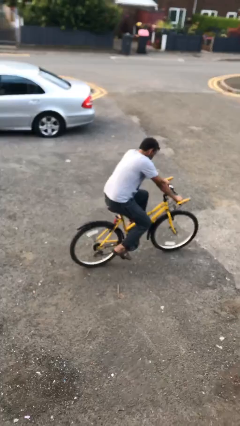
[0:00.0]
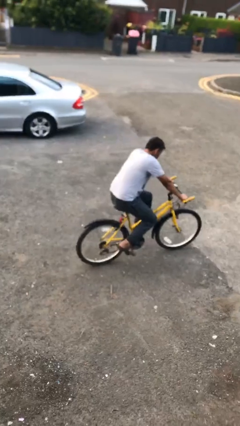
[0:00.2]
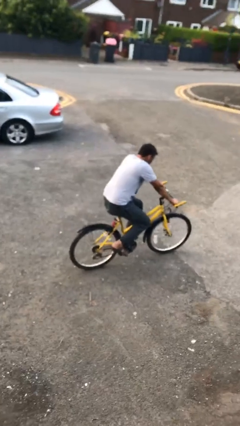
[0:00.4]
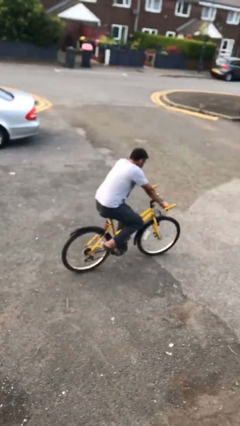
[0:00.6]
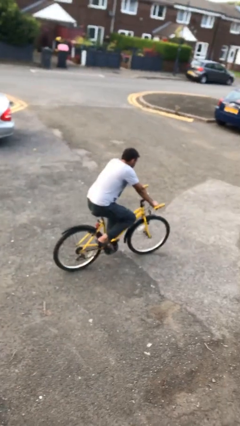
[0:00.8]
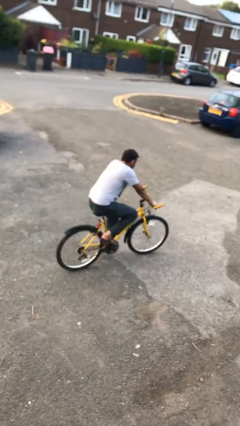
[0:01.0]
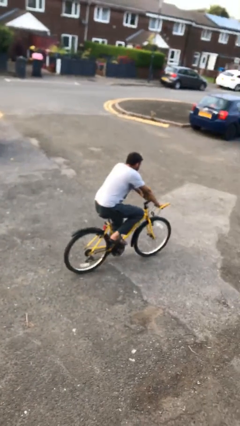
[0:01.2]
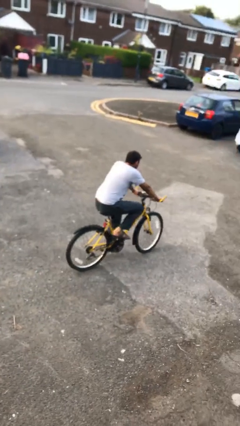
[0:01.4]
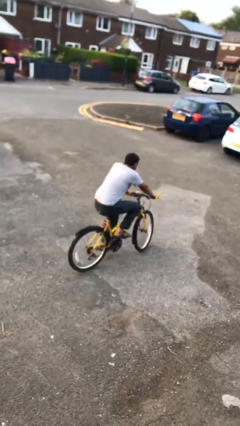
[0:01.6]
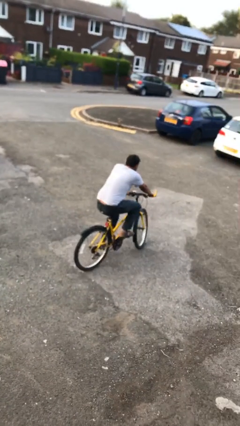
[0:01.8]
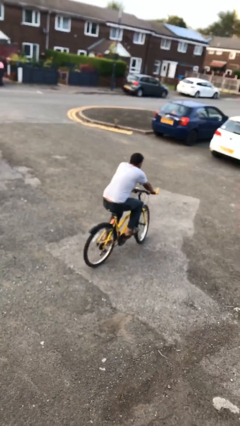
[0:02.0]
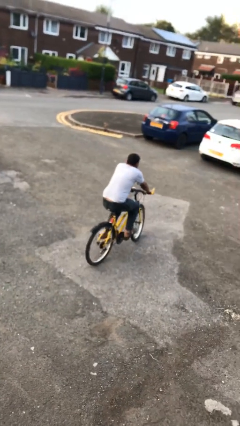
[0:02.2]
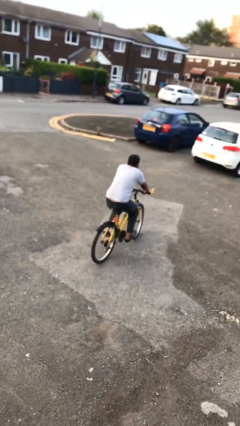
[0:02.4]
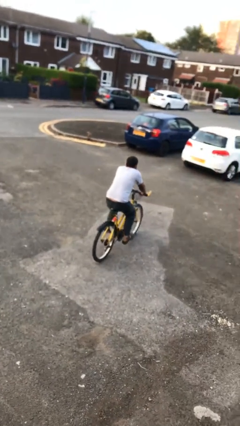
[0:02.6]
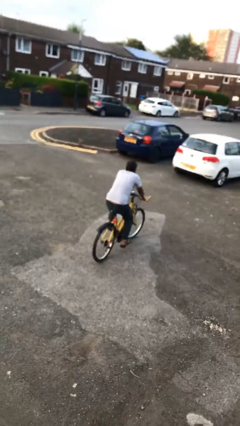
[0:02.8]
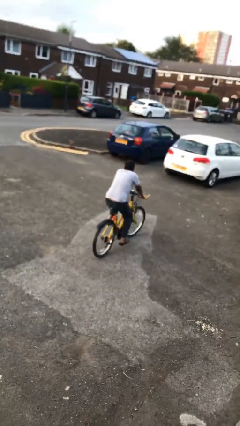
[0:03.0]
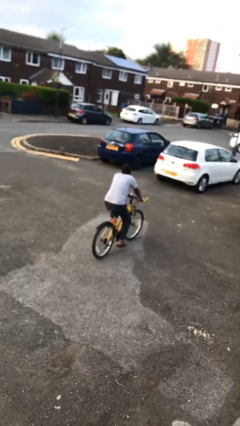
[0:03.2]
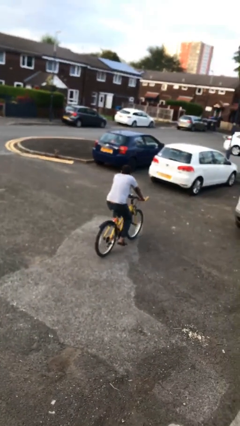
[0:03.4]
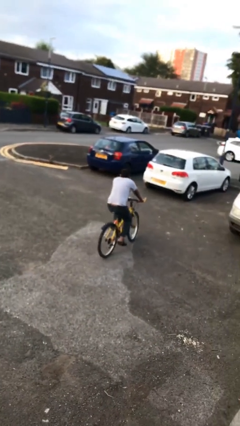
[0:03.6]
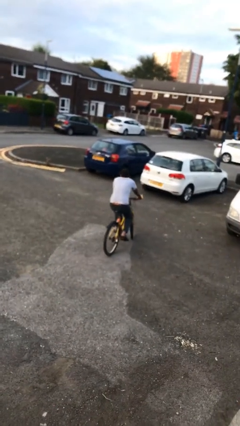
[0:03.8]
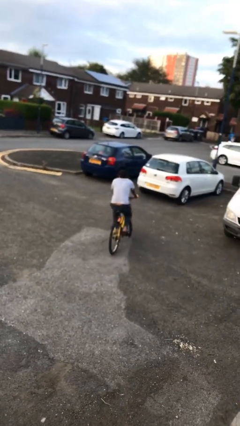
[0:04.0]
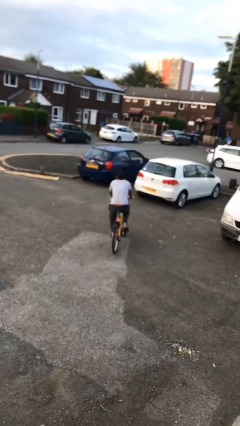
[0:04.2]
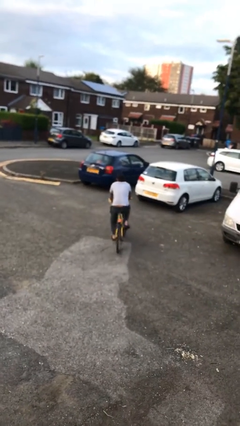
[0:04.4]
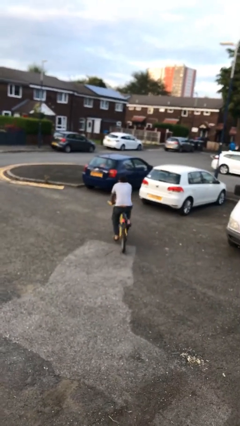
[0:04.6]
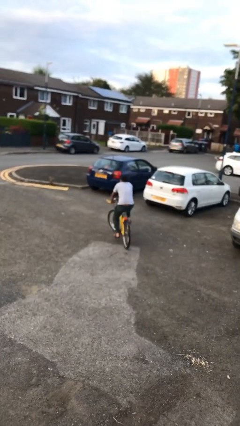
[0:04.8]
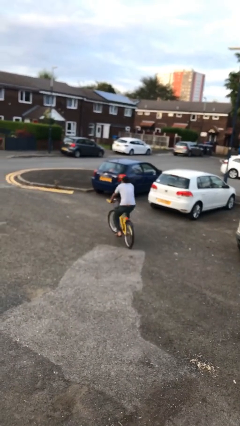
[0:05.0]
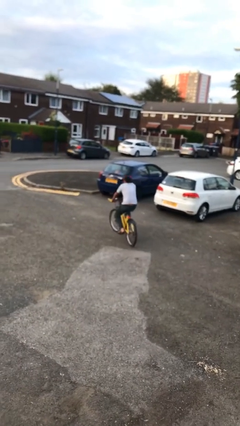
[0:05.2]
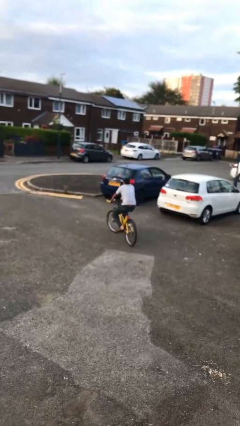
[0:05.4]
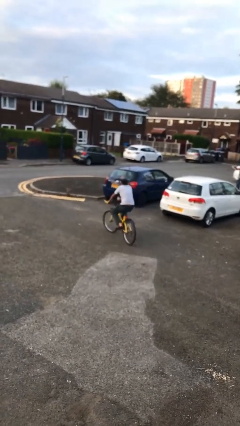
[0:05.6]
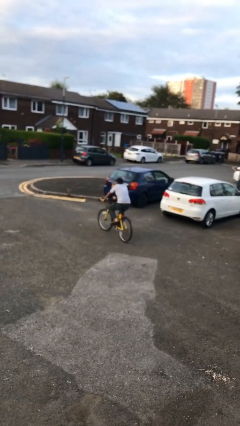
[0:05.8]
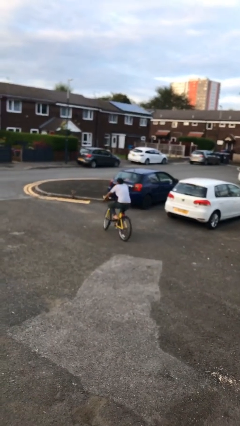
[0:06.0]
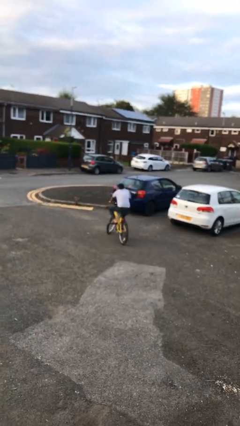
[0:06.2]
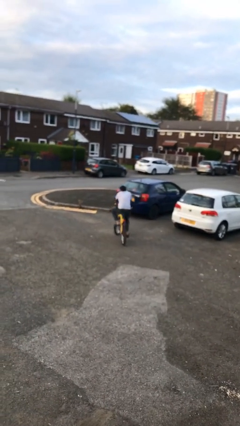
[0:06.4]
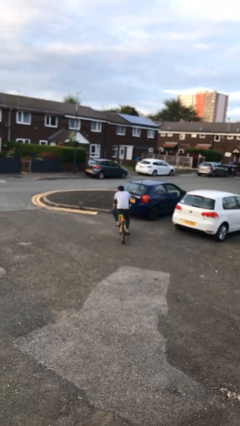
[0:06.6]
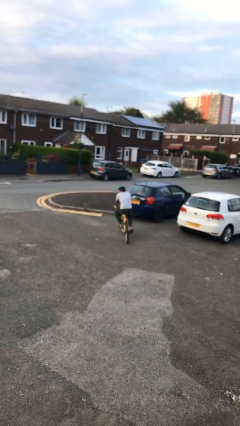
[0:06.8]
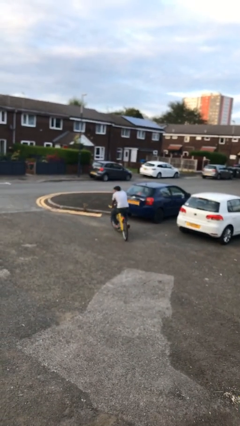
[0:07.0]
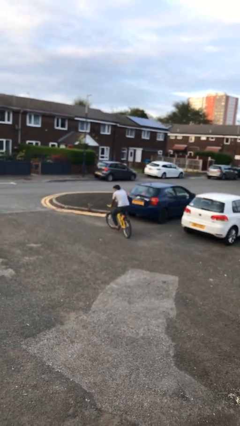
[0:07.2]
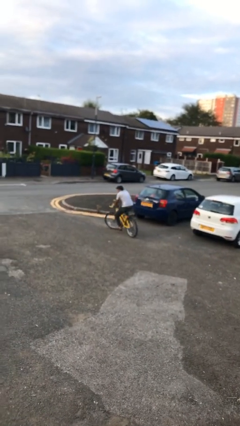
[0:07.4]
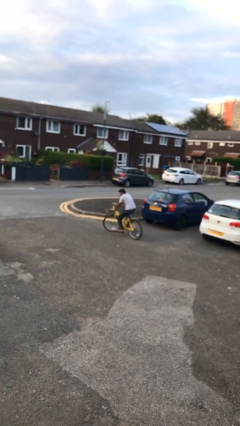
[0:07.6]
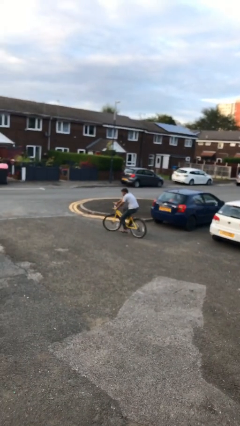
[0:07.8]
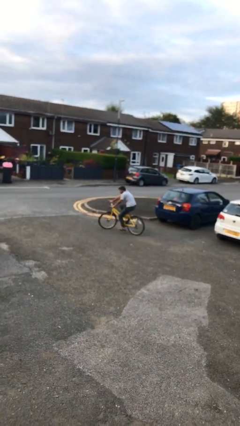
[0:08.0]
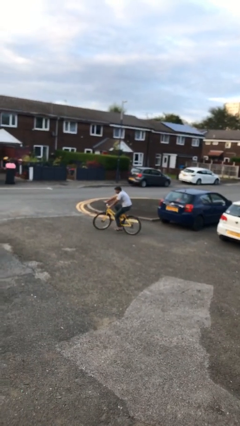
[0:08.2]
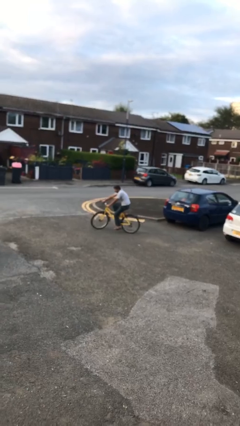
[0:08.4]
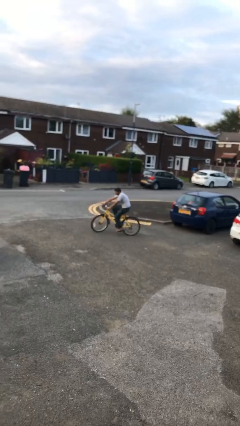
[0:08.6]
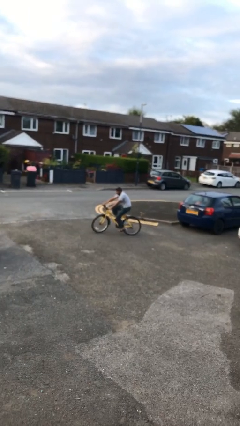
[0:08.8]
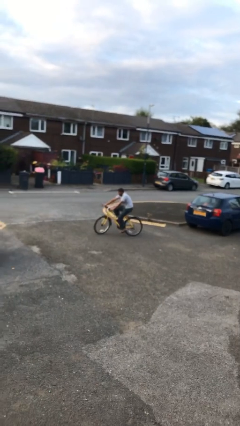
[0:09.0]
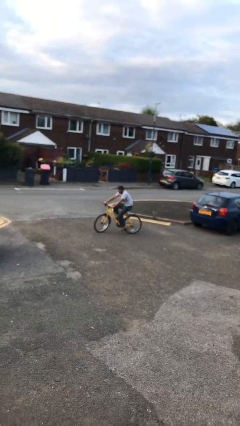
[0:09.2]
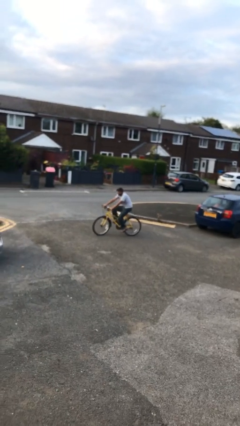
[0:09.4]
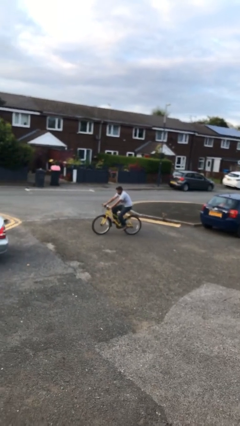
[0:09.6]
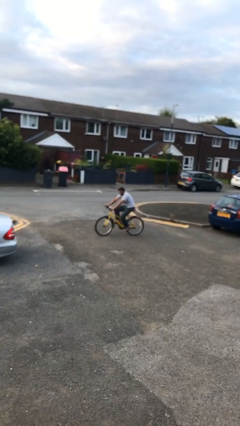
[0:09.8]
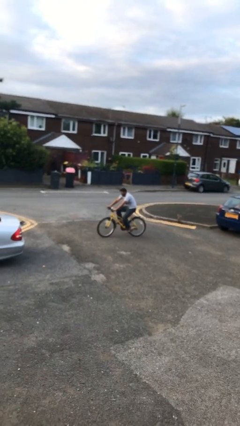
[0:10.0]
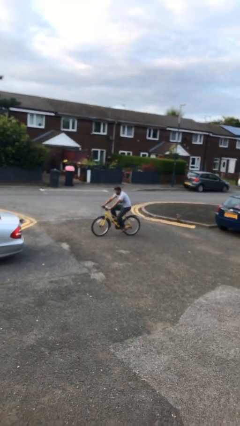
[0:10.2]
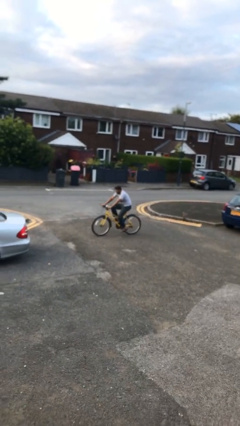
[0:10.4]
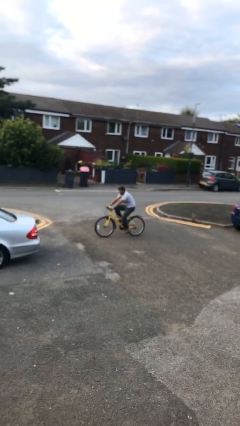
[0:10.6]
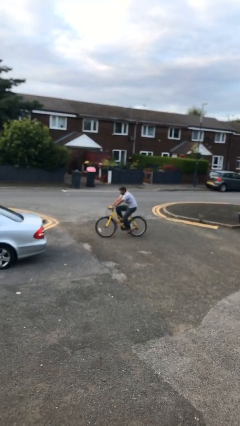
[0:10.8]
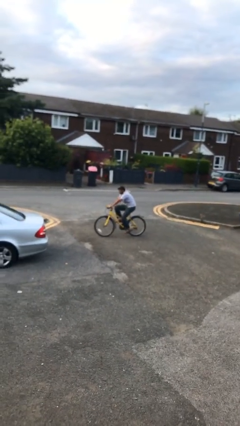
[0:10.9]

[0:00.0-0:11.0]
person rides bicycle

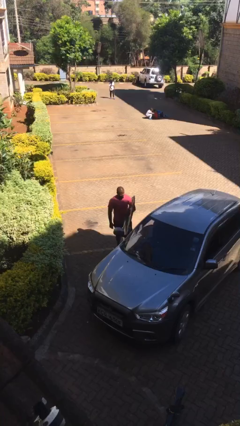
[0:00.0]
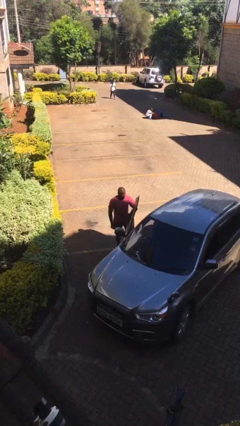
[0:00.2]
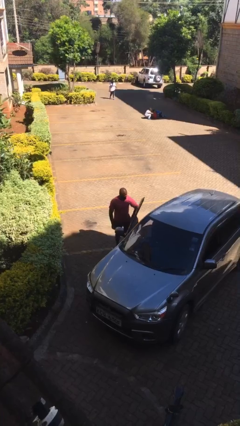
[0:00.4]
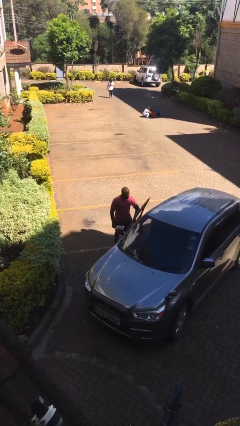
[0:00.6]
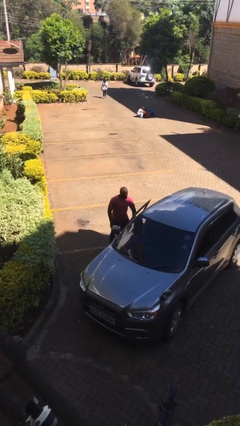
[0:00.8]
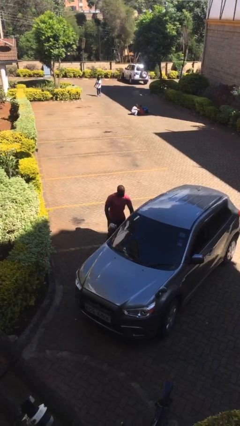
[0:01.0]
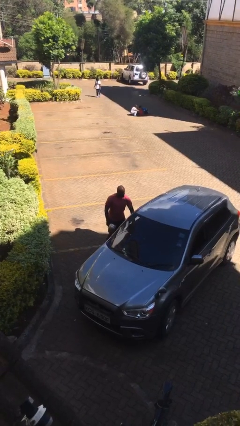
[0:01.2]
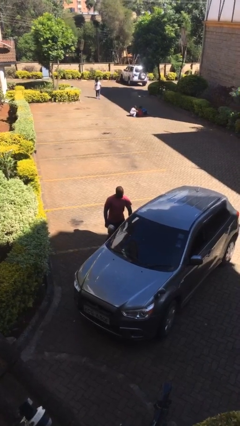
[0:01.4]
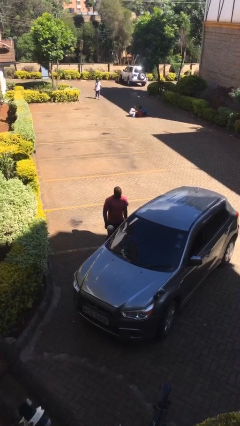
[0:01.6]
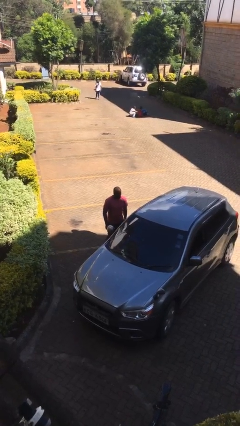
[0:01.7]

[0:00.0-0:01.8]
person closes car door

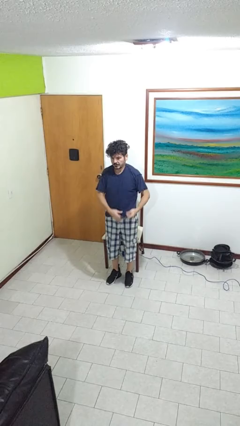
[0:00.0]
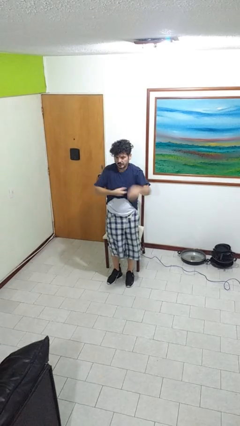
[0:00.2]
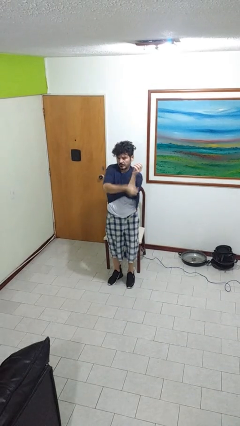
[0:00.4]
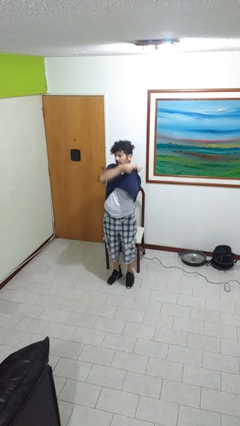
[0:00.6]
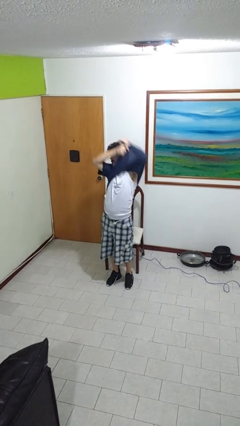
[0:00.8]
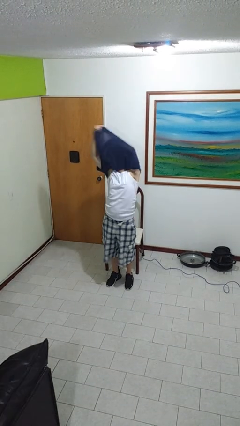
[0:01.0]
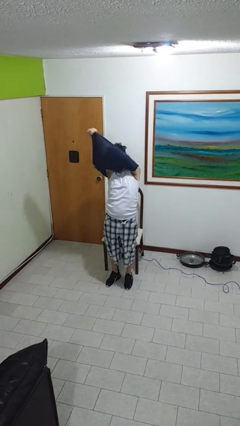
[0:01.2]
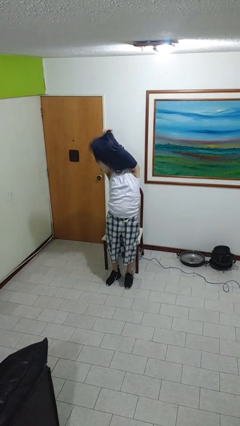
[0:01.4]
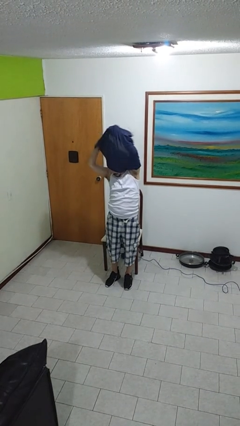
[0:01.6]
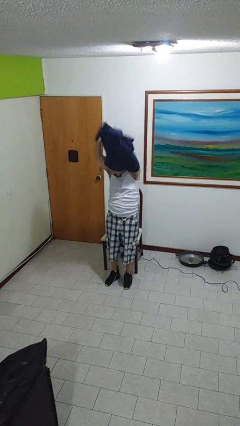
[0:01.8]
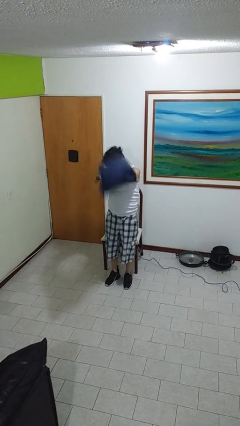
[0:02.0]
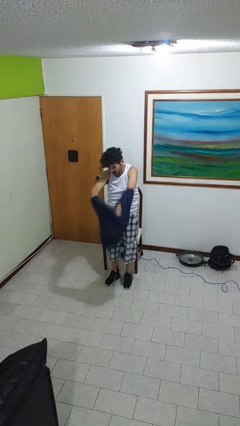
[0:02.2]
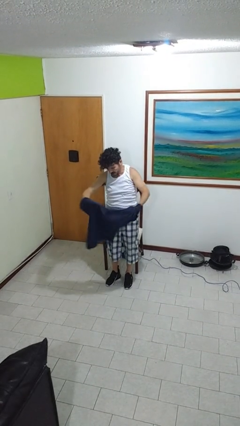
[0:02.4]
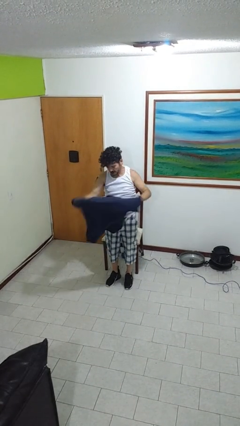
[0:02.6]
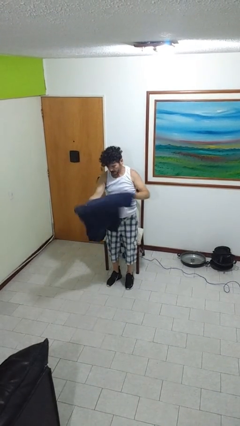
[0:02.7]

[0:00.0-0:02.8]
person takes off shirt

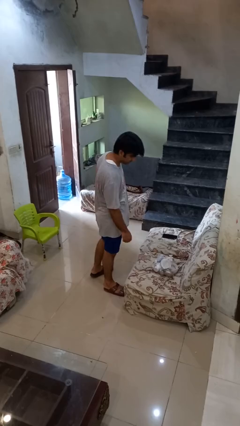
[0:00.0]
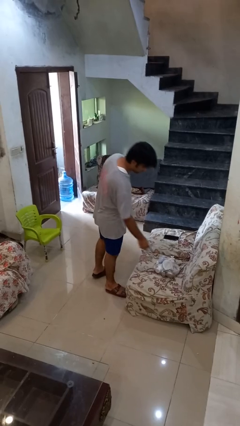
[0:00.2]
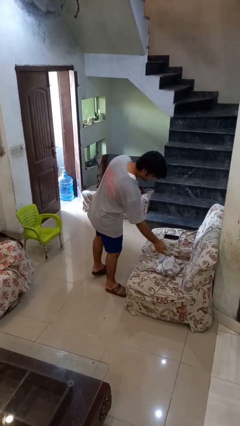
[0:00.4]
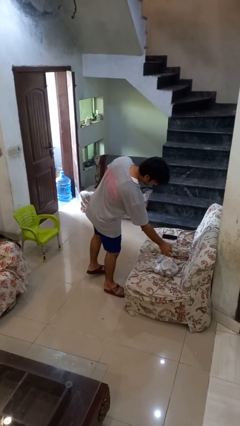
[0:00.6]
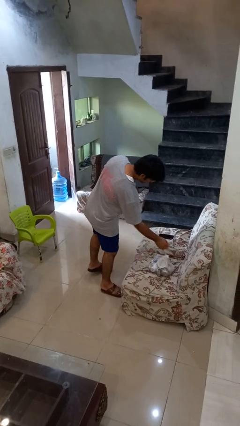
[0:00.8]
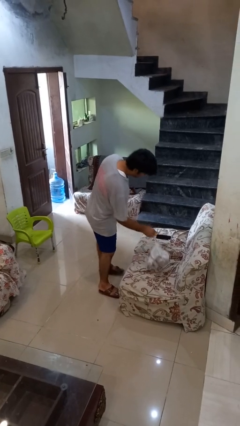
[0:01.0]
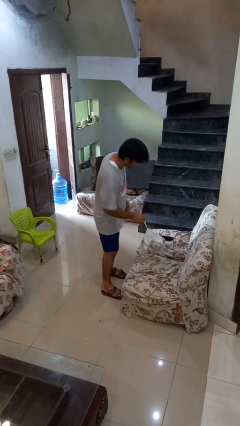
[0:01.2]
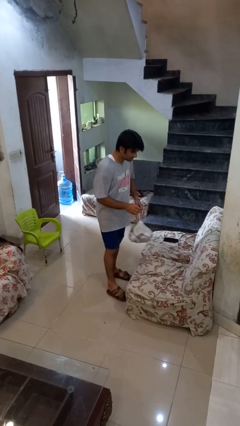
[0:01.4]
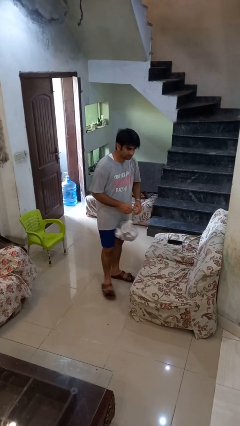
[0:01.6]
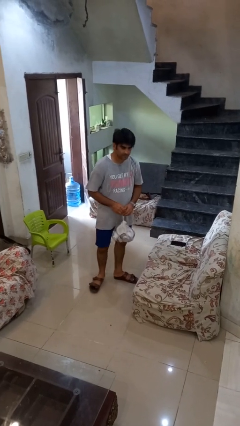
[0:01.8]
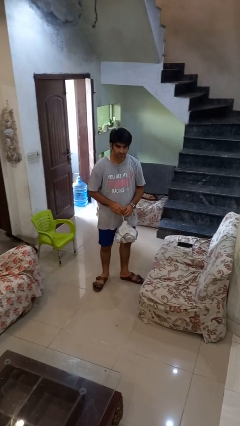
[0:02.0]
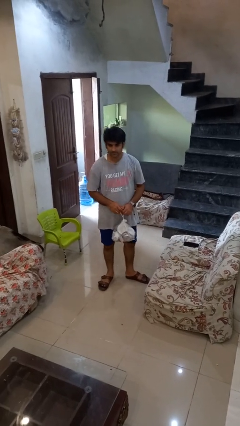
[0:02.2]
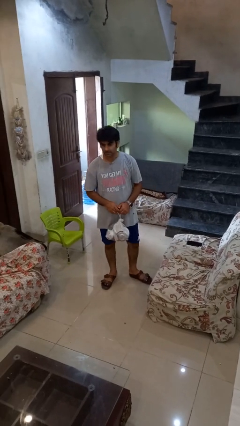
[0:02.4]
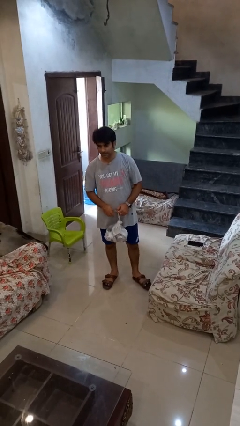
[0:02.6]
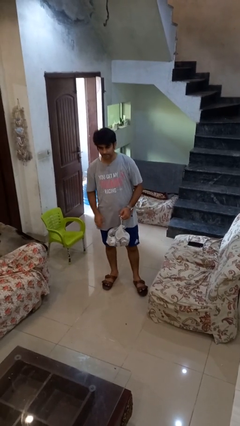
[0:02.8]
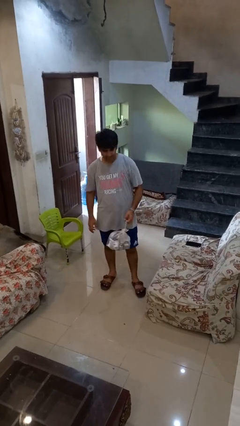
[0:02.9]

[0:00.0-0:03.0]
person picks up object from couch
